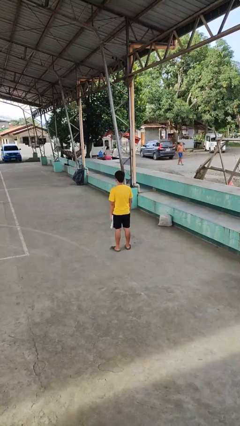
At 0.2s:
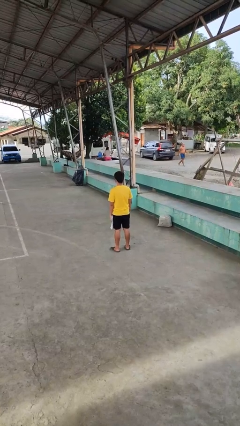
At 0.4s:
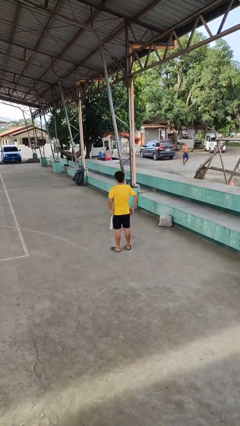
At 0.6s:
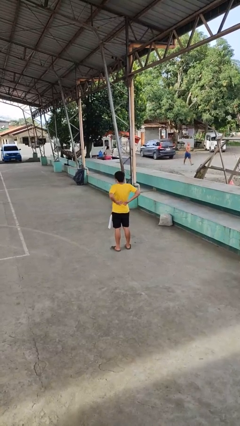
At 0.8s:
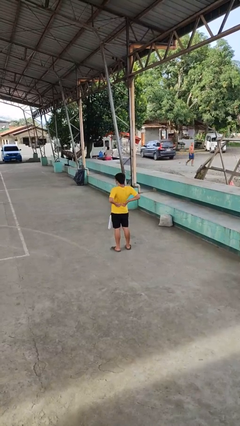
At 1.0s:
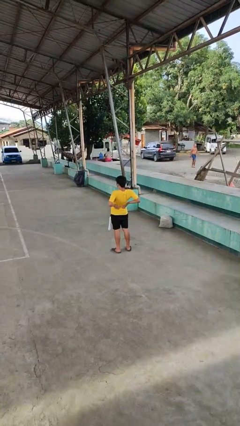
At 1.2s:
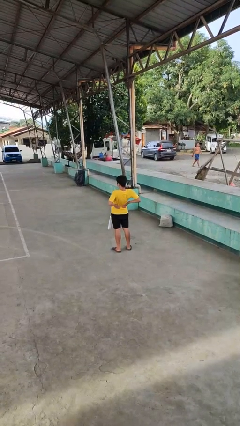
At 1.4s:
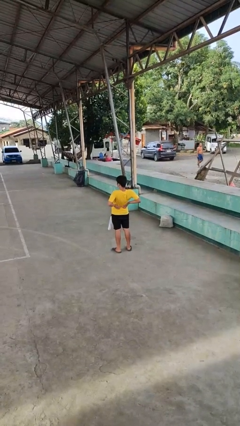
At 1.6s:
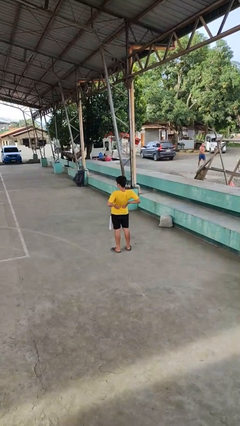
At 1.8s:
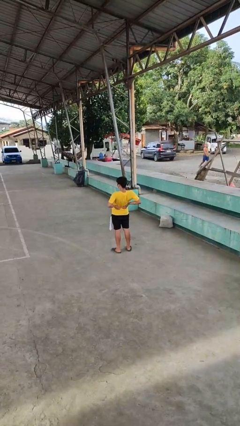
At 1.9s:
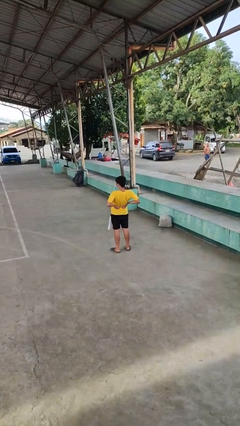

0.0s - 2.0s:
person stretches back

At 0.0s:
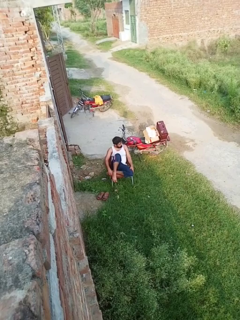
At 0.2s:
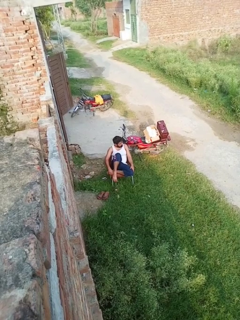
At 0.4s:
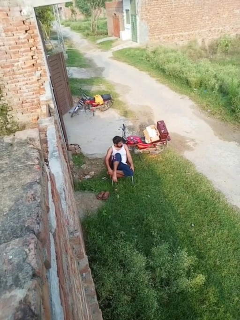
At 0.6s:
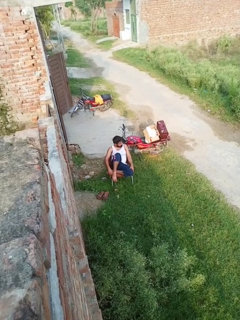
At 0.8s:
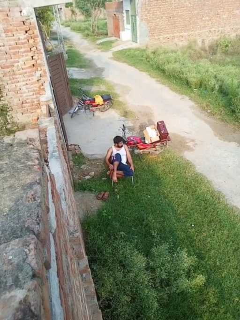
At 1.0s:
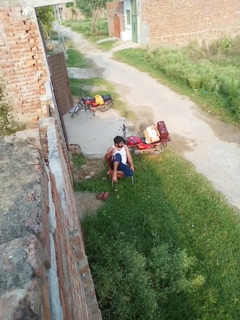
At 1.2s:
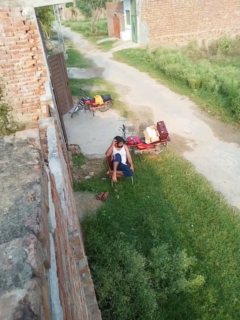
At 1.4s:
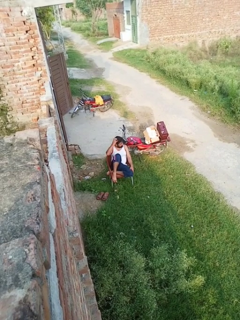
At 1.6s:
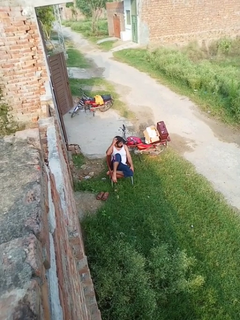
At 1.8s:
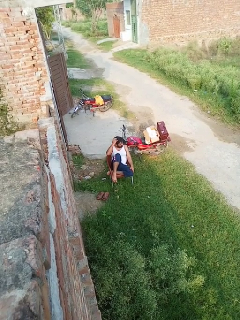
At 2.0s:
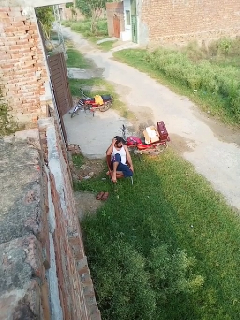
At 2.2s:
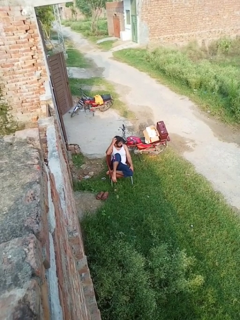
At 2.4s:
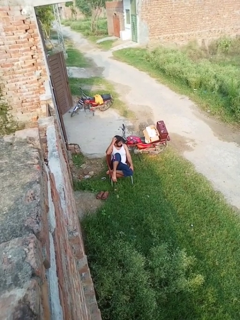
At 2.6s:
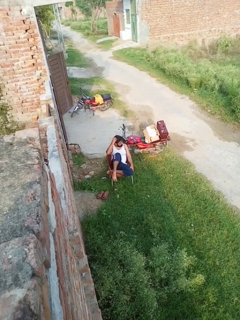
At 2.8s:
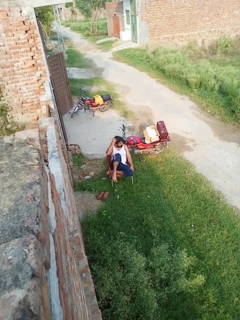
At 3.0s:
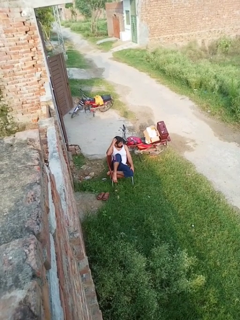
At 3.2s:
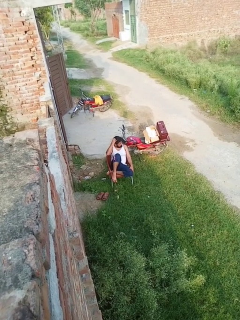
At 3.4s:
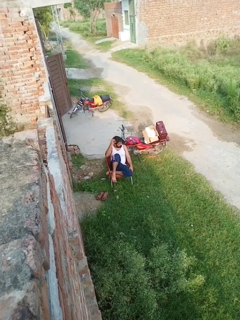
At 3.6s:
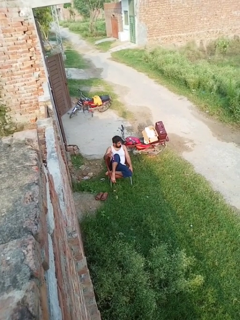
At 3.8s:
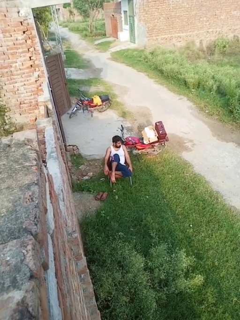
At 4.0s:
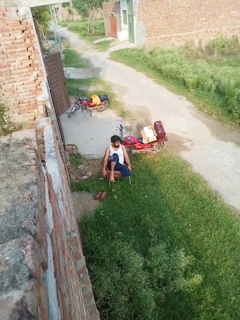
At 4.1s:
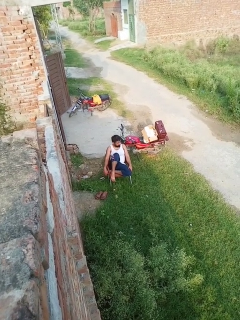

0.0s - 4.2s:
person scratches face

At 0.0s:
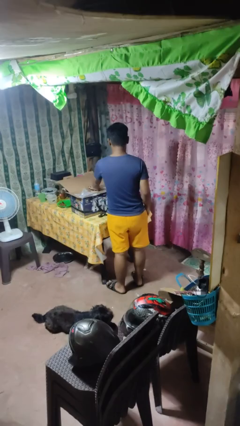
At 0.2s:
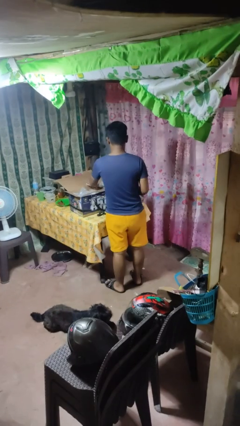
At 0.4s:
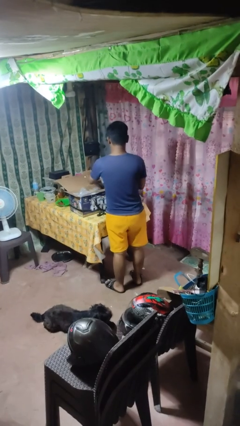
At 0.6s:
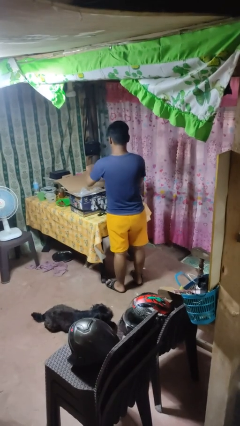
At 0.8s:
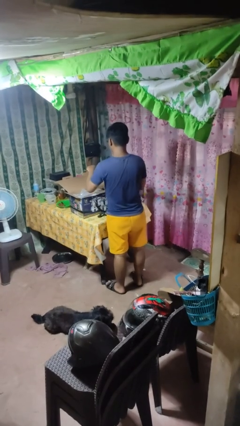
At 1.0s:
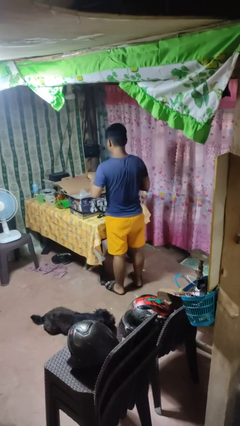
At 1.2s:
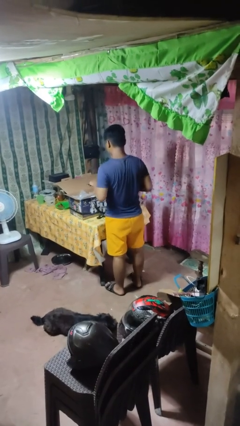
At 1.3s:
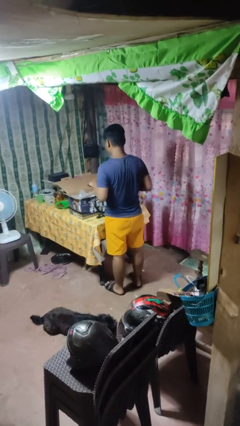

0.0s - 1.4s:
person takes object from box

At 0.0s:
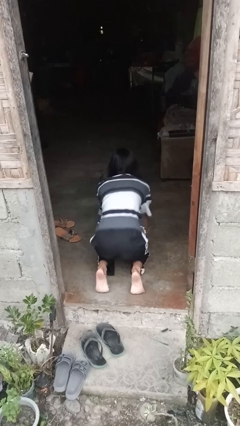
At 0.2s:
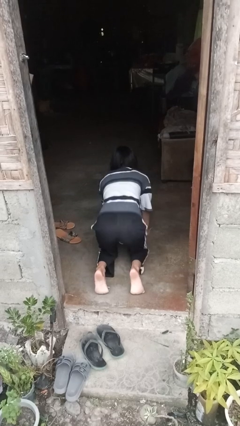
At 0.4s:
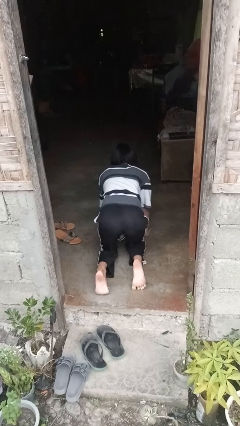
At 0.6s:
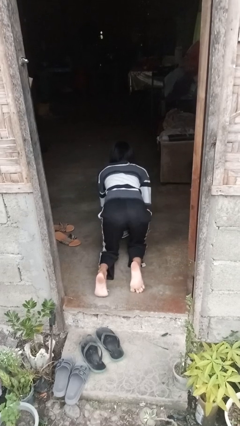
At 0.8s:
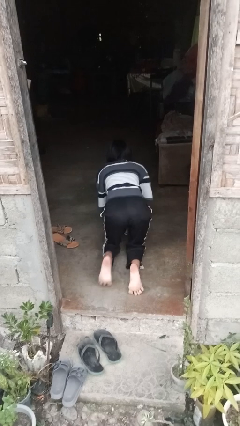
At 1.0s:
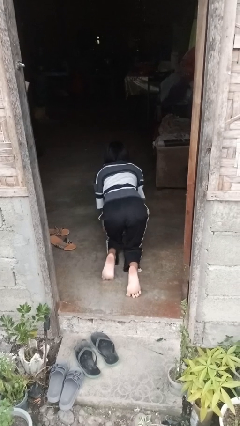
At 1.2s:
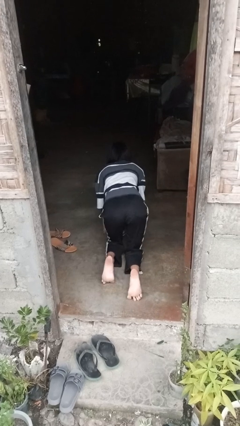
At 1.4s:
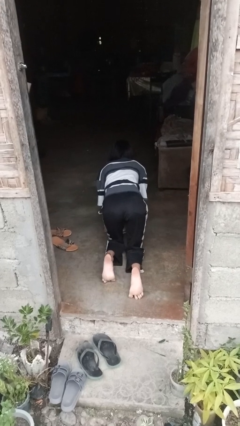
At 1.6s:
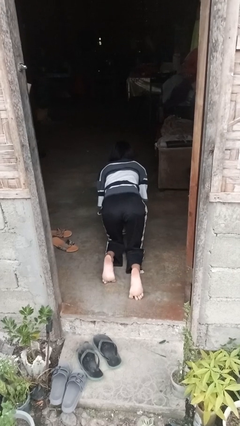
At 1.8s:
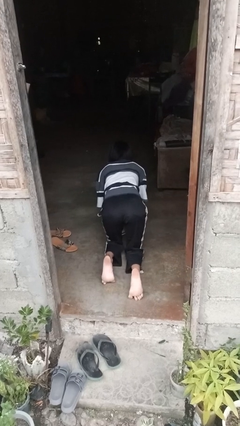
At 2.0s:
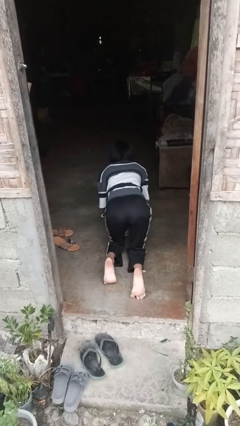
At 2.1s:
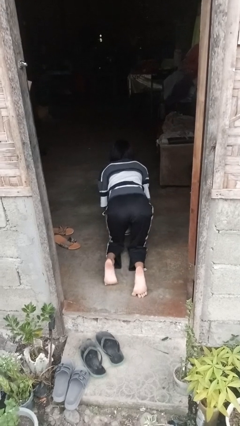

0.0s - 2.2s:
person crawls

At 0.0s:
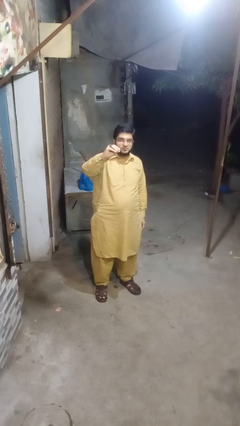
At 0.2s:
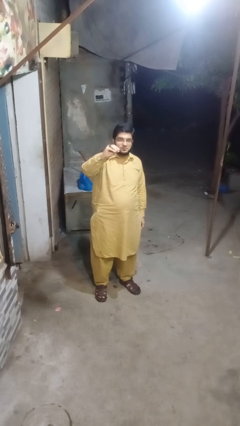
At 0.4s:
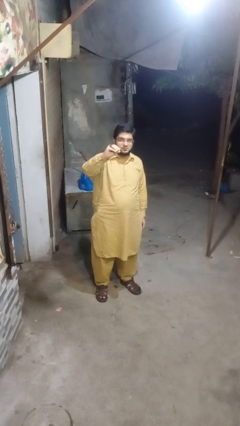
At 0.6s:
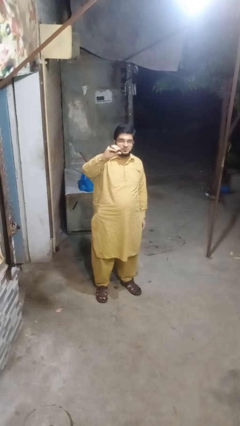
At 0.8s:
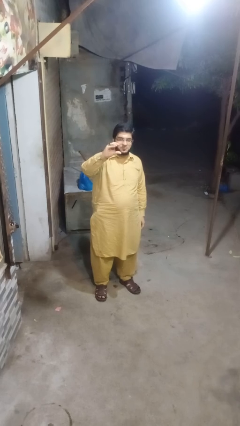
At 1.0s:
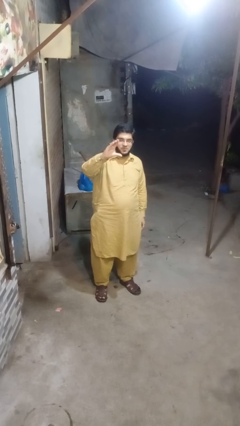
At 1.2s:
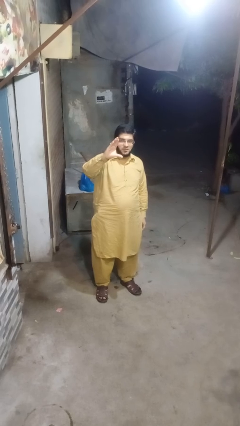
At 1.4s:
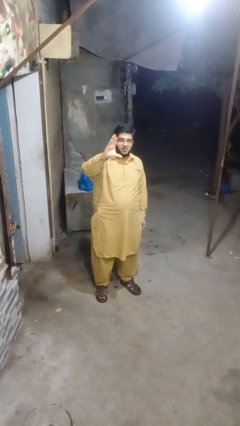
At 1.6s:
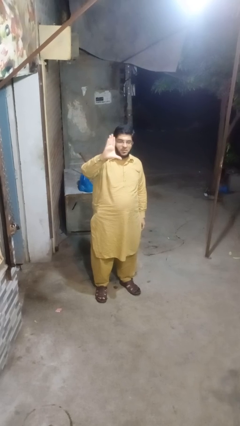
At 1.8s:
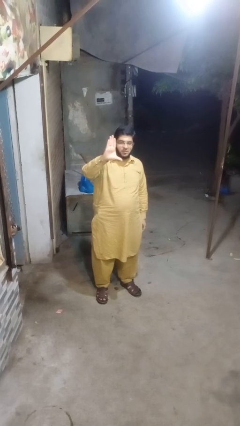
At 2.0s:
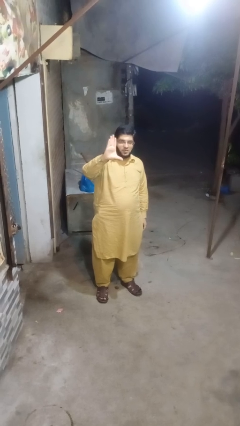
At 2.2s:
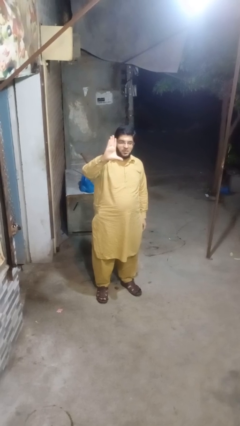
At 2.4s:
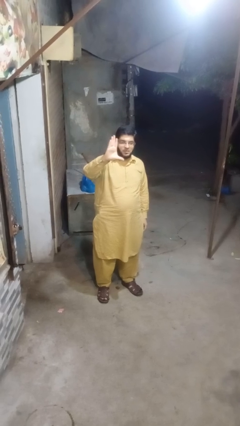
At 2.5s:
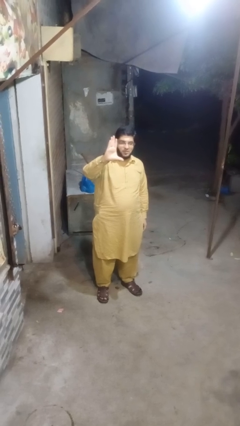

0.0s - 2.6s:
person gestures zoom in

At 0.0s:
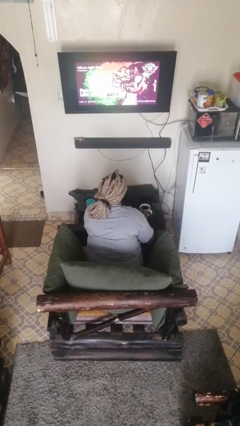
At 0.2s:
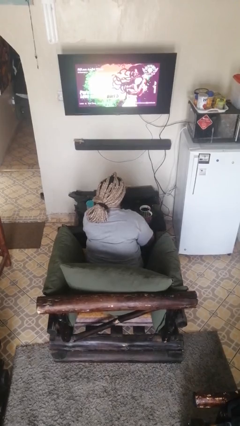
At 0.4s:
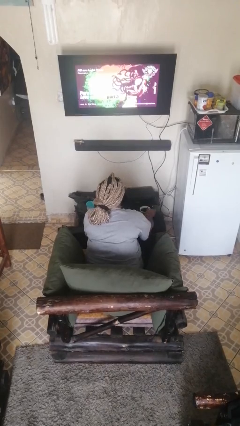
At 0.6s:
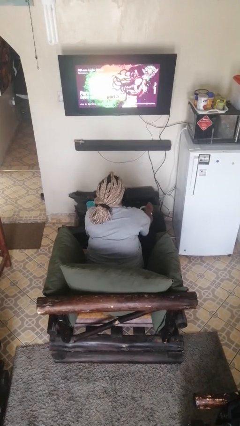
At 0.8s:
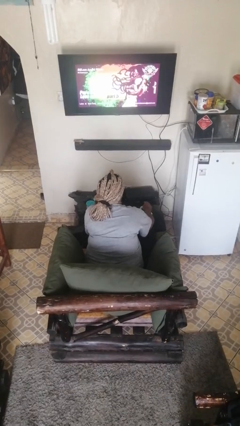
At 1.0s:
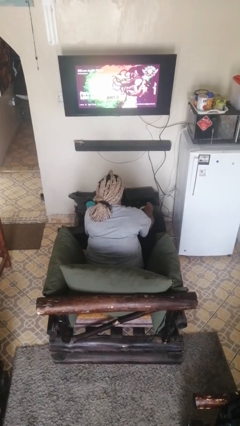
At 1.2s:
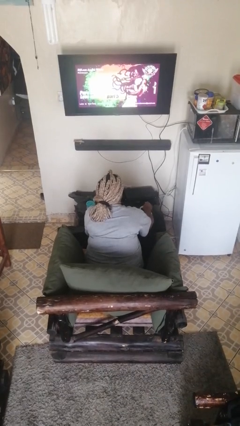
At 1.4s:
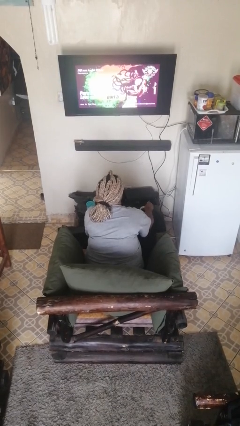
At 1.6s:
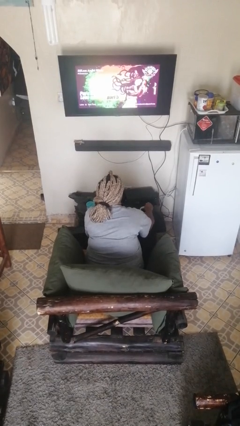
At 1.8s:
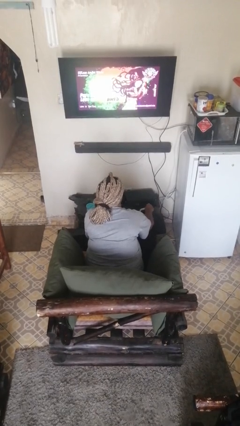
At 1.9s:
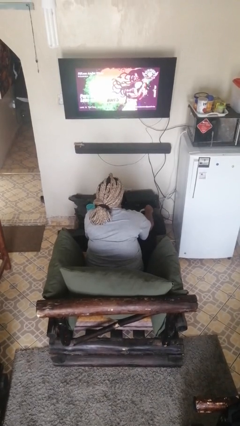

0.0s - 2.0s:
person stirs mug

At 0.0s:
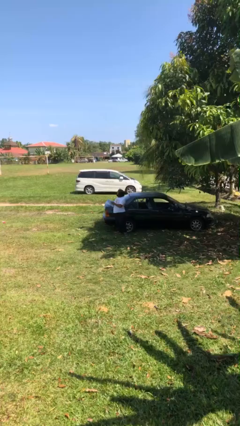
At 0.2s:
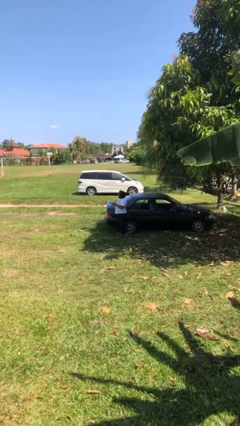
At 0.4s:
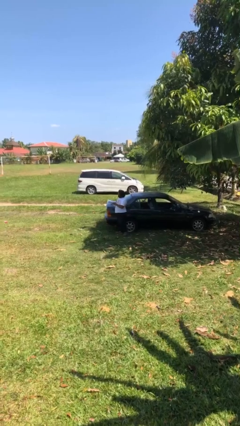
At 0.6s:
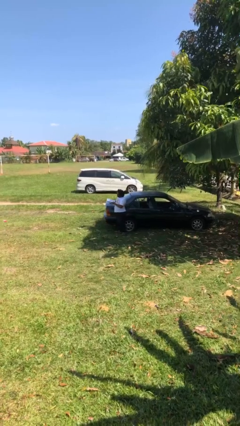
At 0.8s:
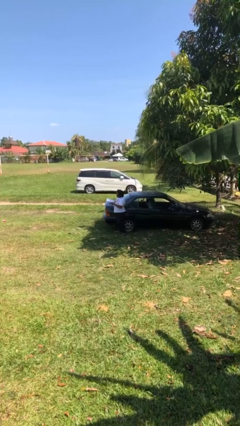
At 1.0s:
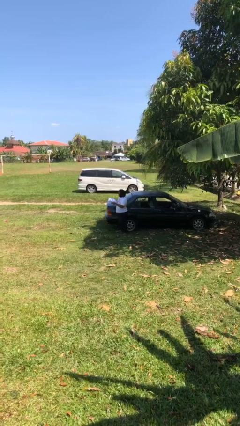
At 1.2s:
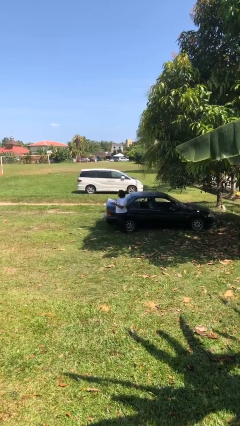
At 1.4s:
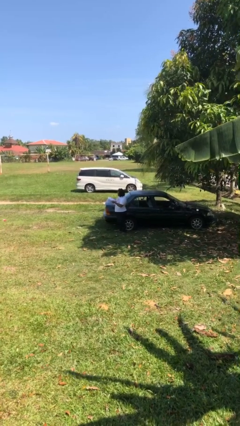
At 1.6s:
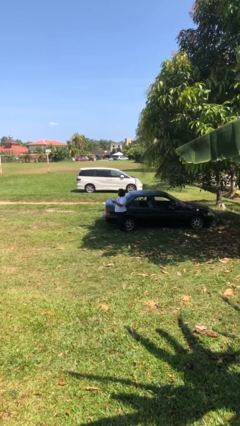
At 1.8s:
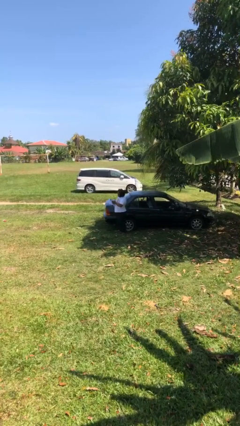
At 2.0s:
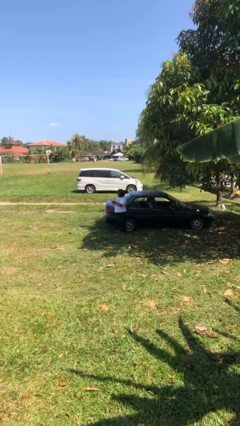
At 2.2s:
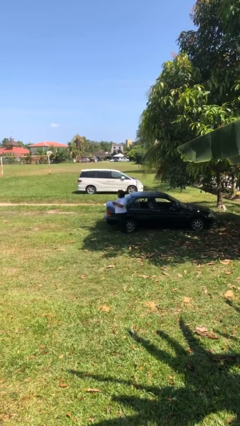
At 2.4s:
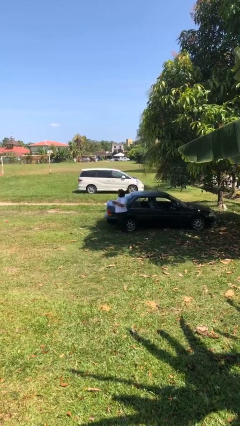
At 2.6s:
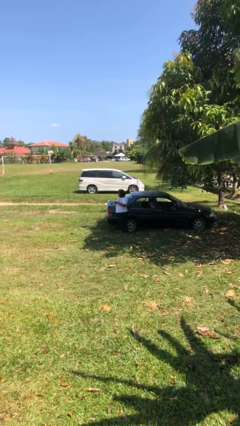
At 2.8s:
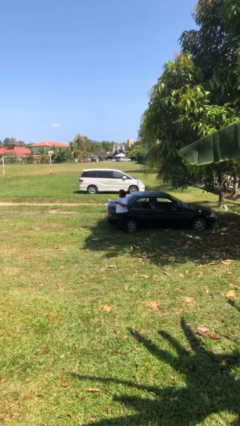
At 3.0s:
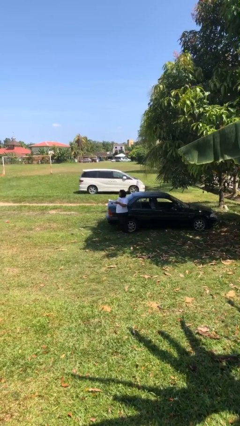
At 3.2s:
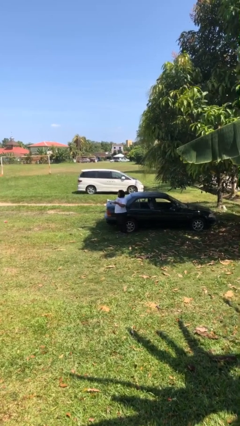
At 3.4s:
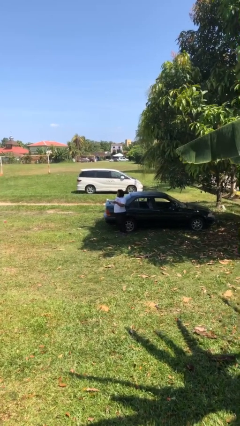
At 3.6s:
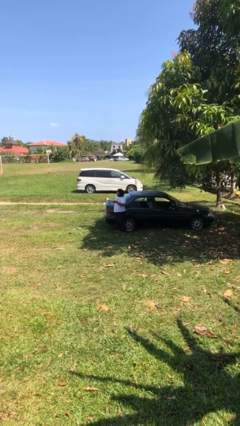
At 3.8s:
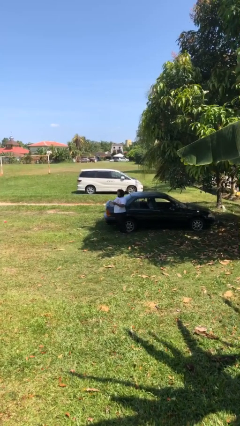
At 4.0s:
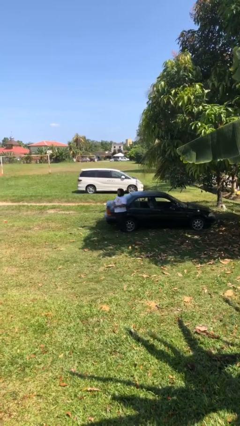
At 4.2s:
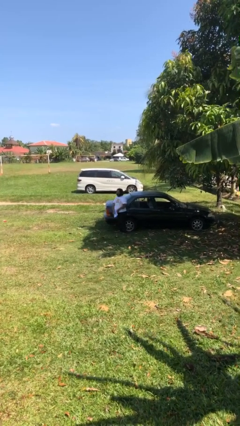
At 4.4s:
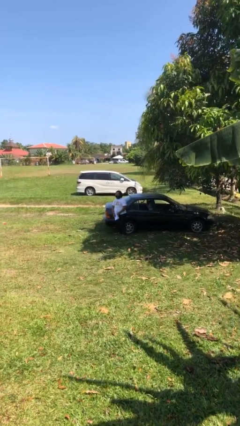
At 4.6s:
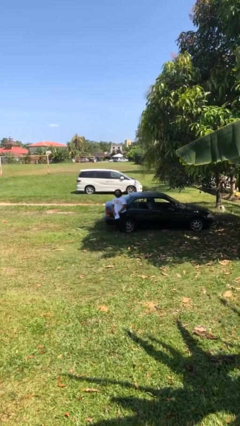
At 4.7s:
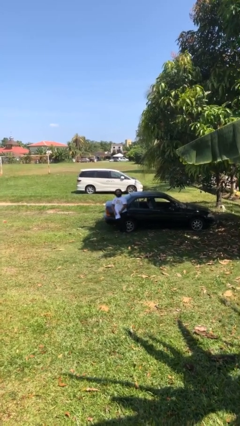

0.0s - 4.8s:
person reads document
